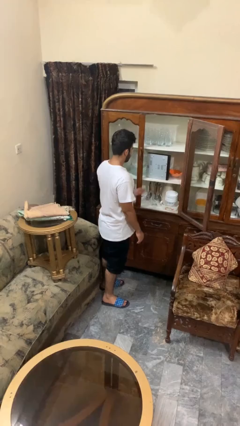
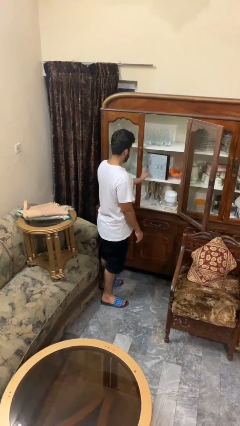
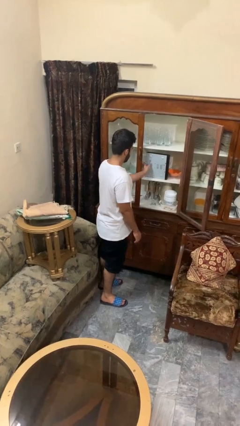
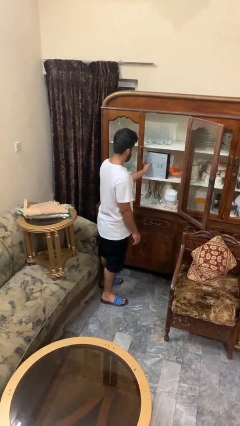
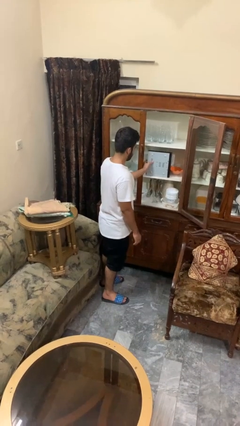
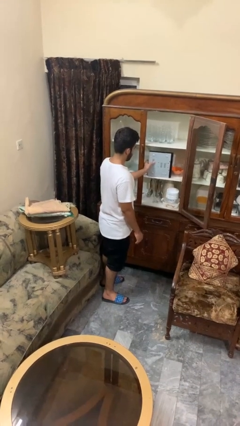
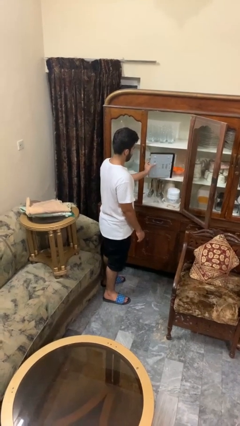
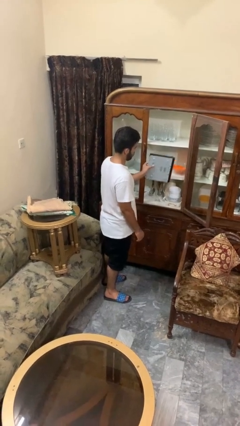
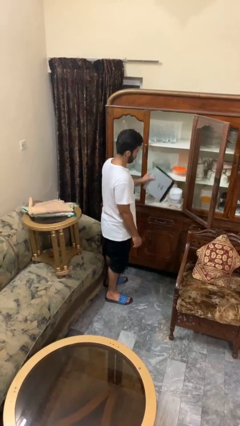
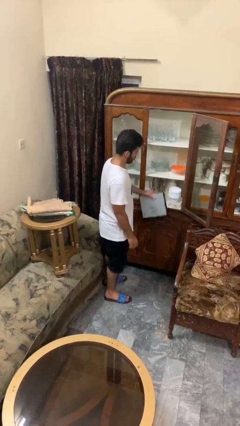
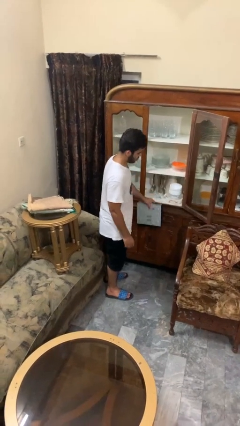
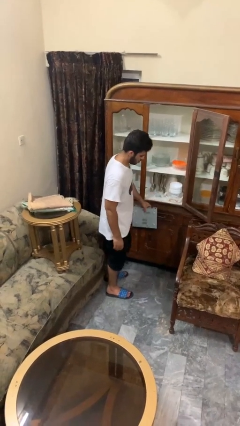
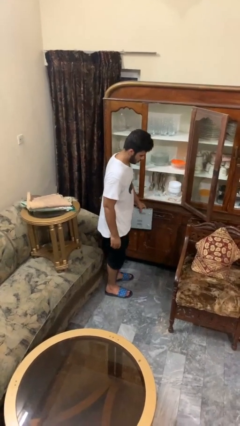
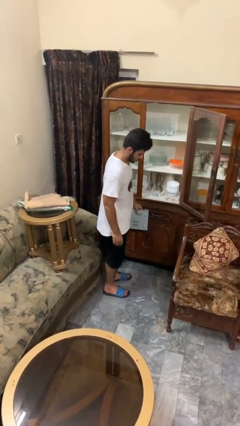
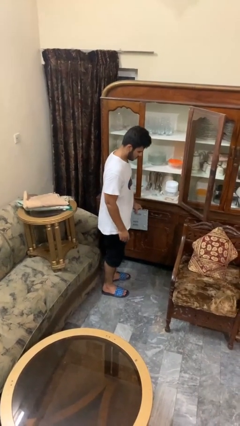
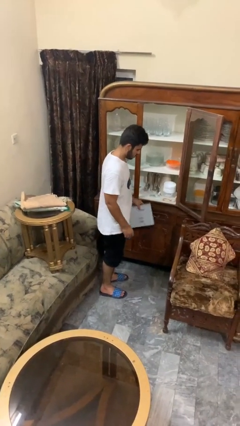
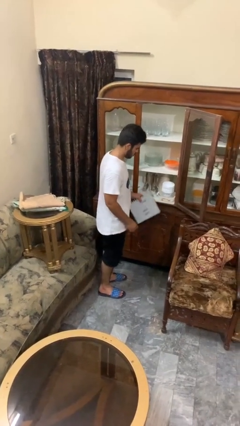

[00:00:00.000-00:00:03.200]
person picks up object from cabinet

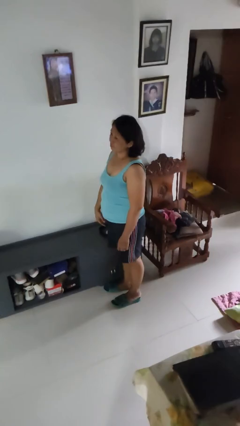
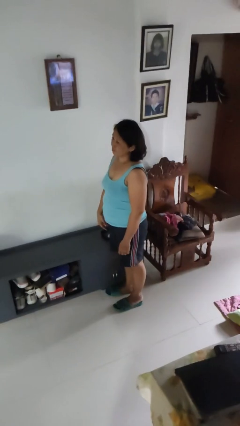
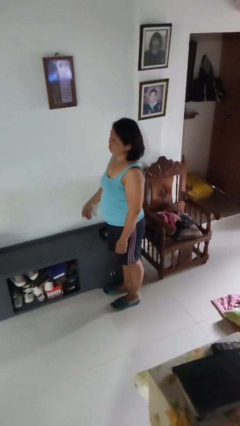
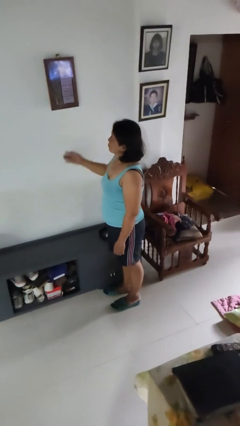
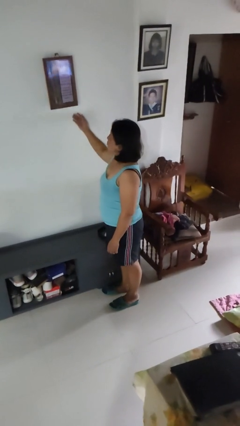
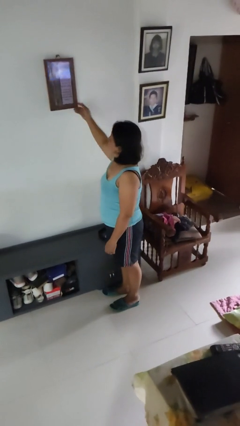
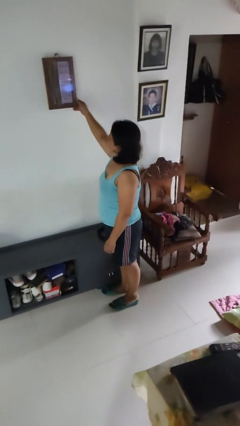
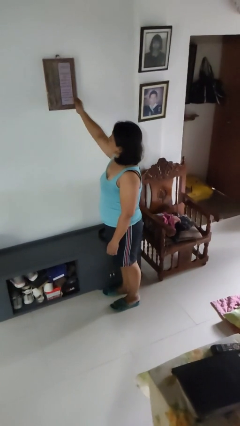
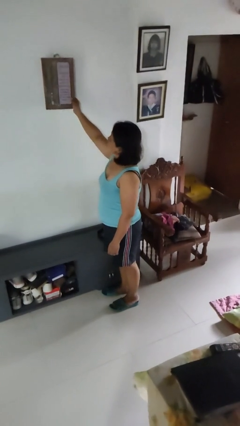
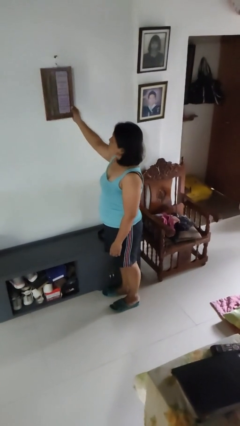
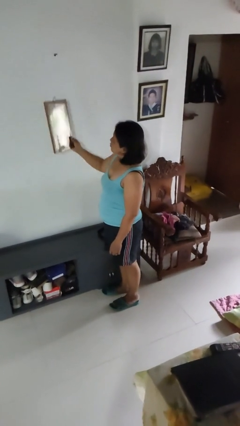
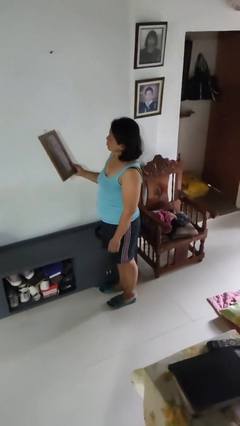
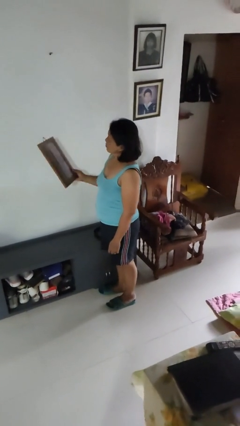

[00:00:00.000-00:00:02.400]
person takes down picture frame

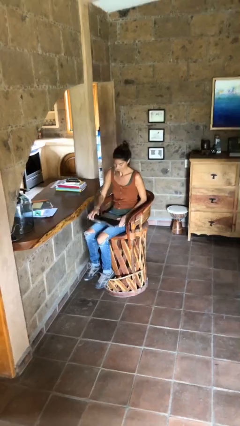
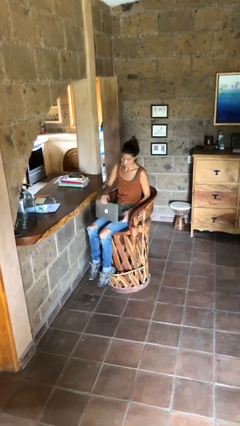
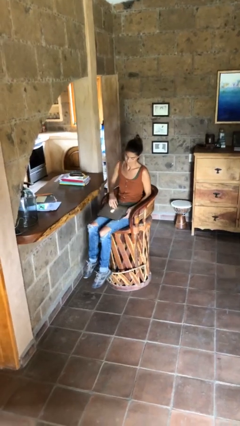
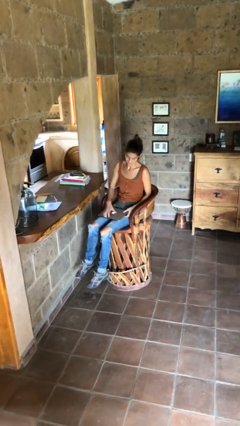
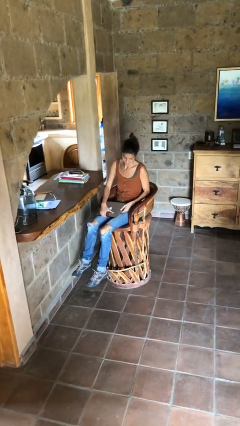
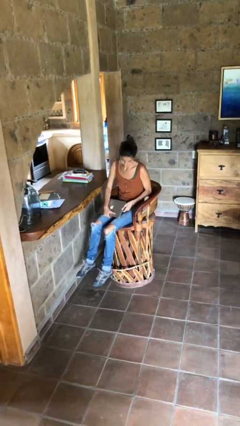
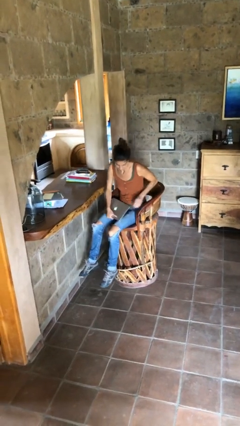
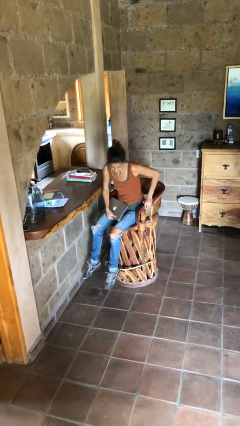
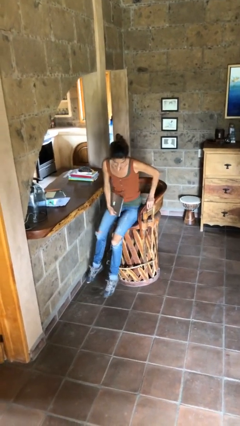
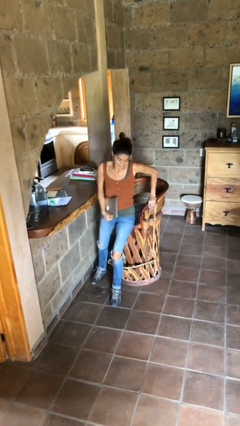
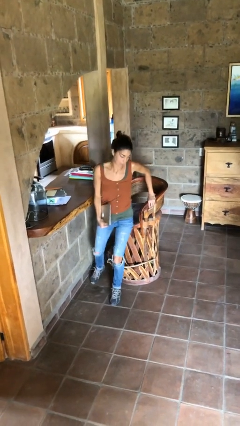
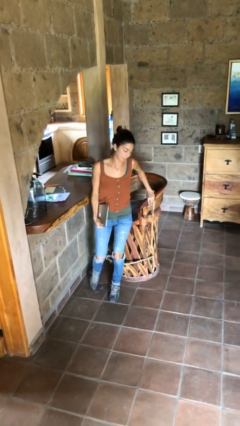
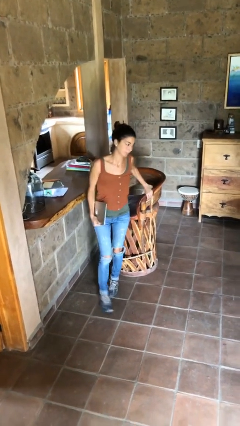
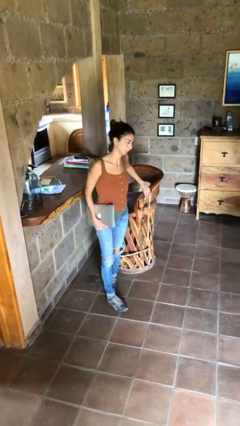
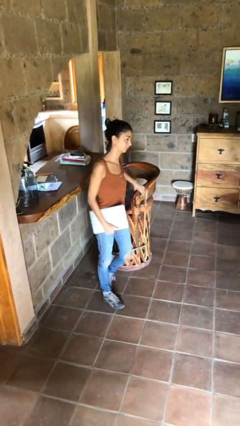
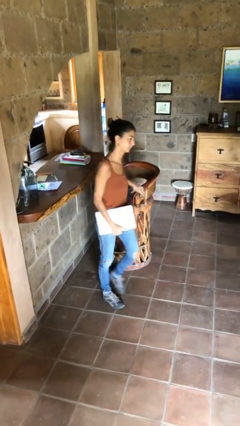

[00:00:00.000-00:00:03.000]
person stands up

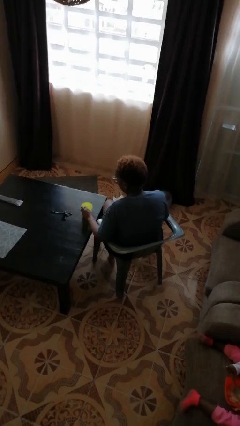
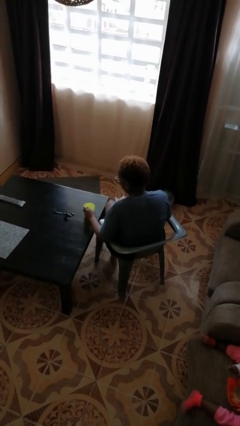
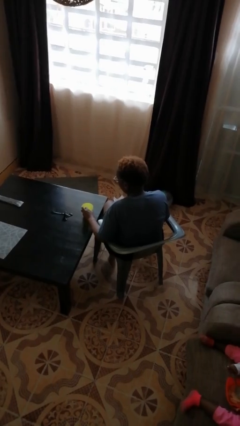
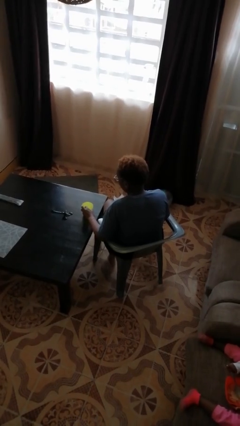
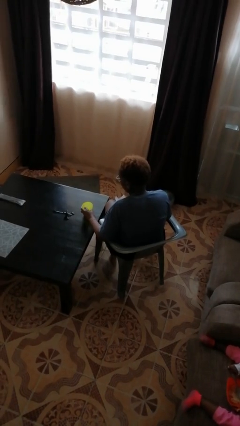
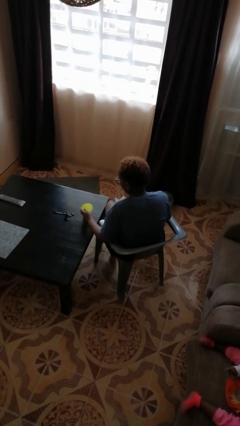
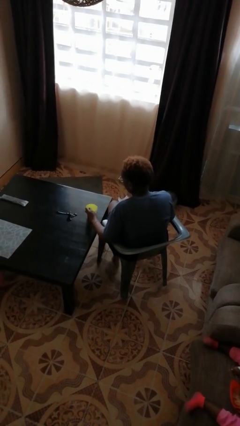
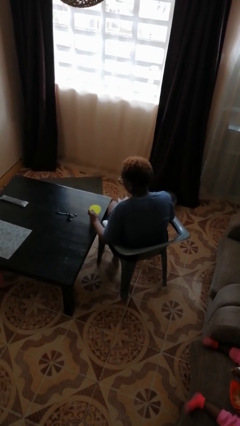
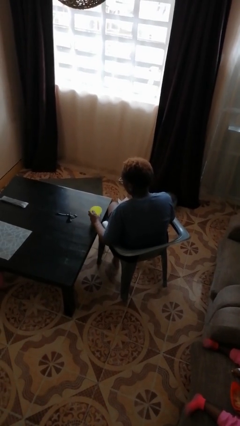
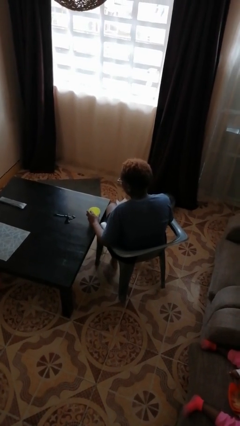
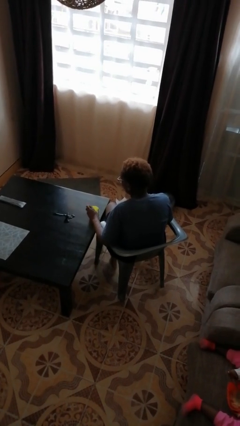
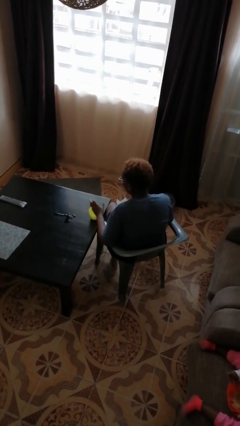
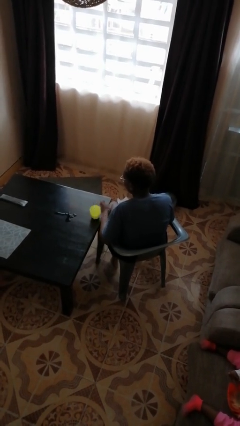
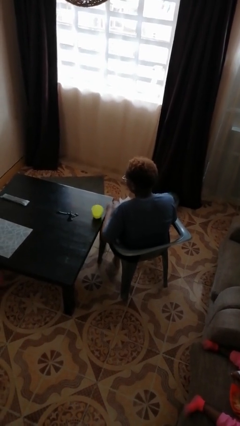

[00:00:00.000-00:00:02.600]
person sets upright glass

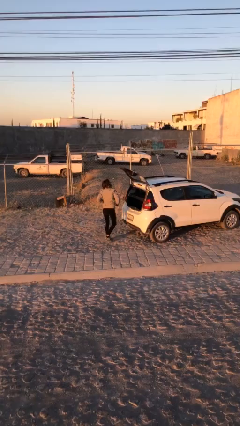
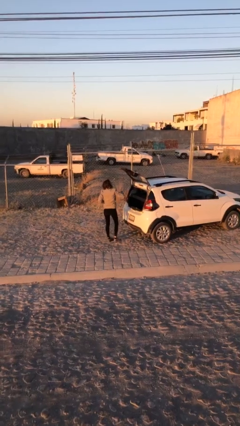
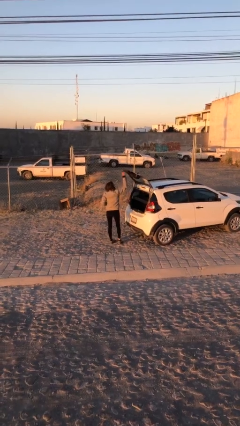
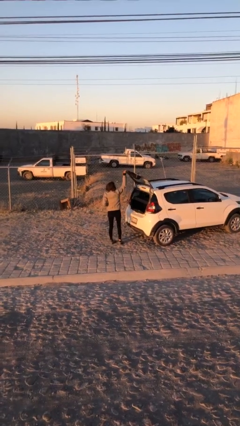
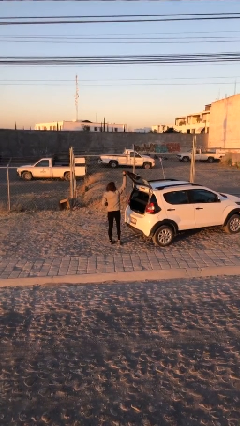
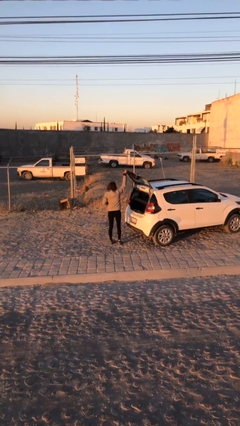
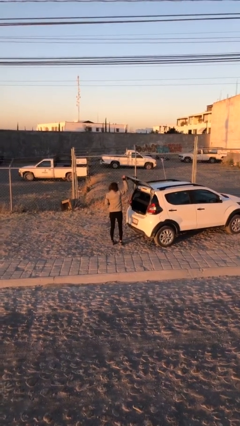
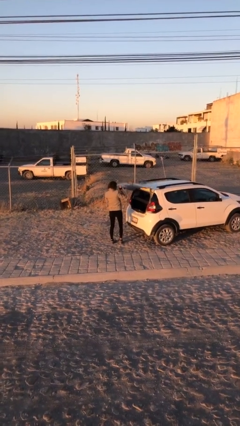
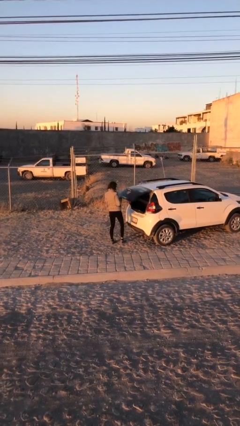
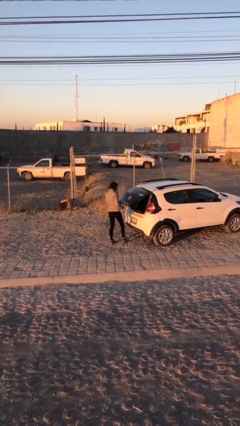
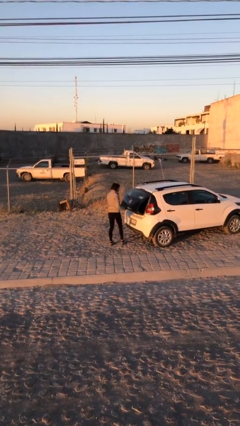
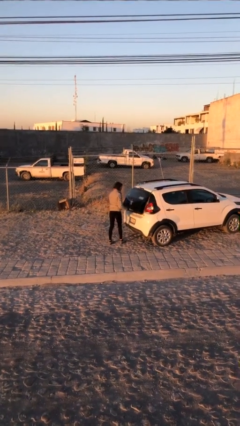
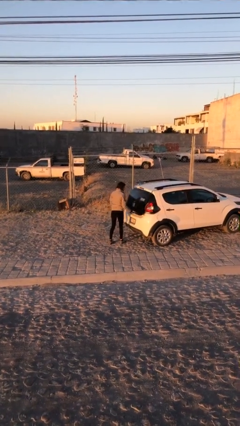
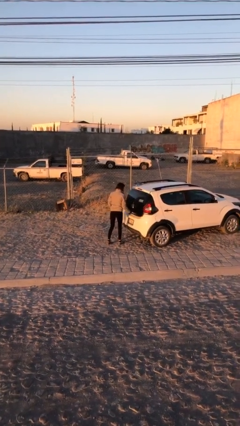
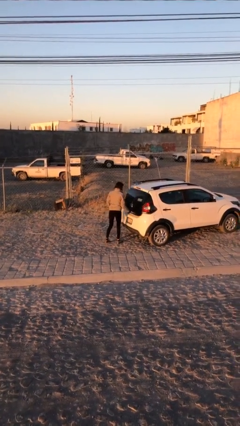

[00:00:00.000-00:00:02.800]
person closes car trunk

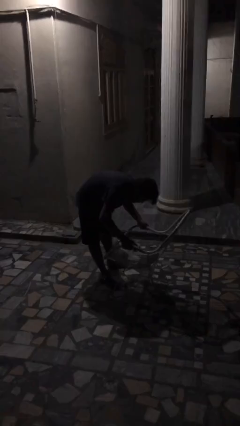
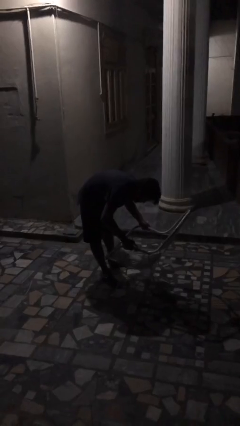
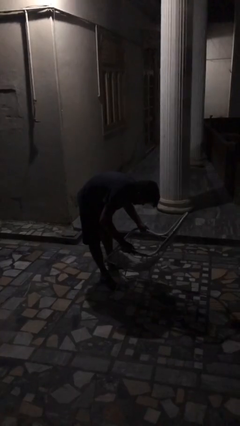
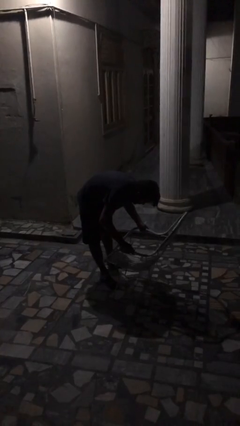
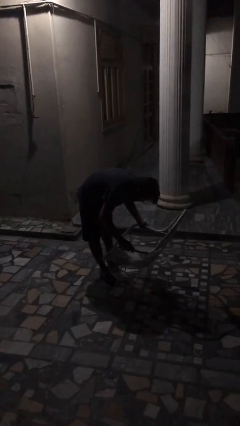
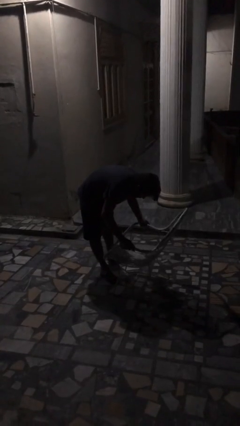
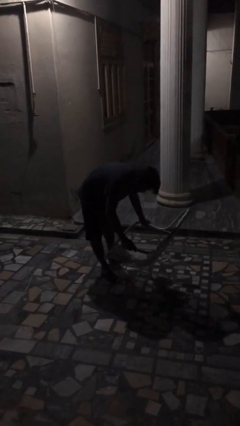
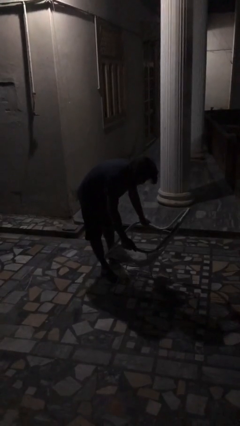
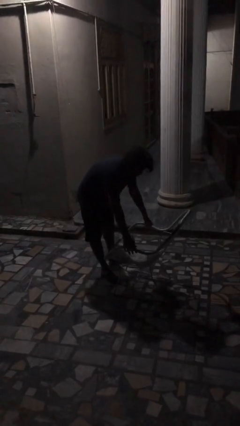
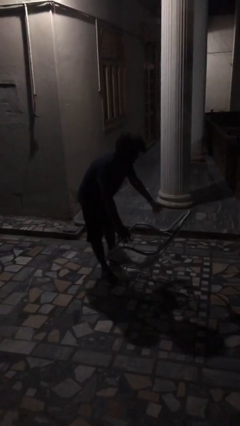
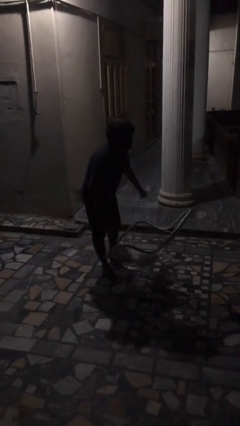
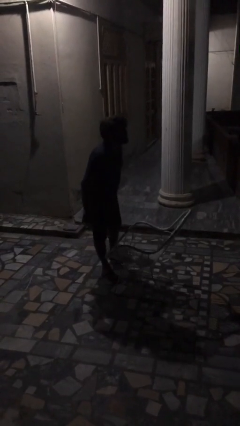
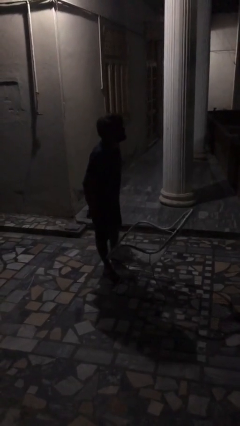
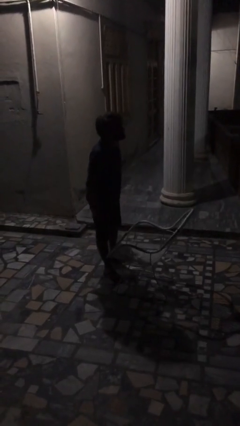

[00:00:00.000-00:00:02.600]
person puts down object on floor

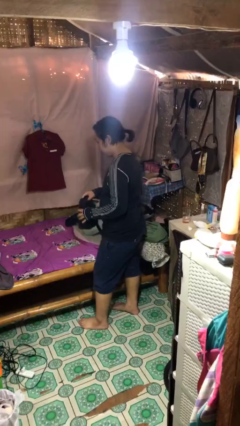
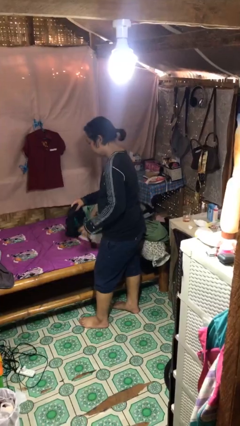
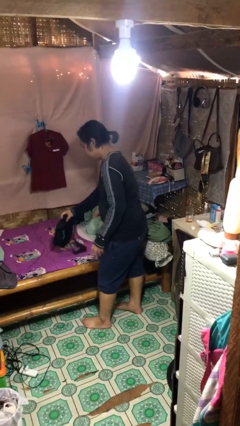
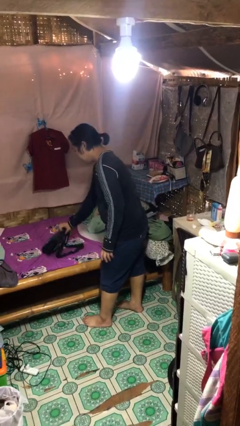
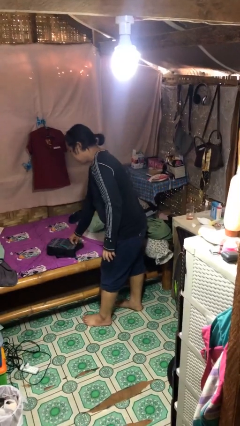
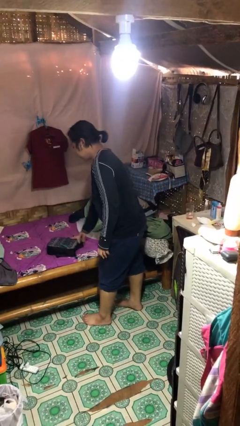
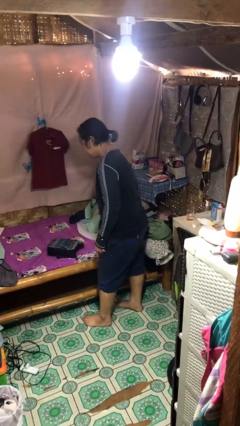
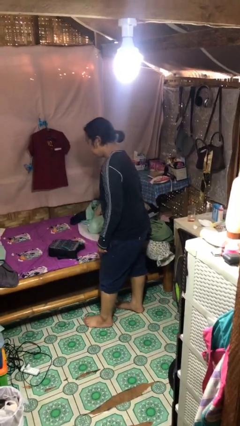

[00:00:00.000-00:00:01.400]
person puts down object on bed
